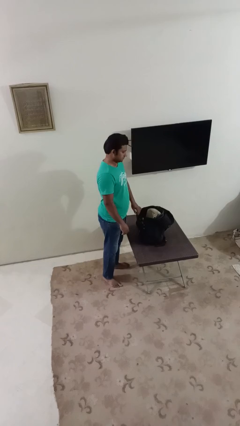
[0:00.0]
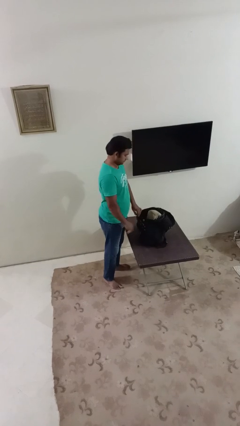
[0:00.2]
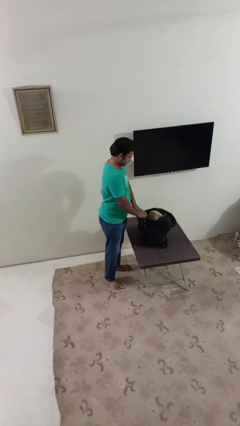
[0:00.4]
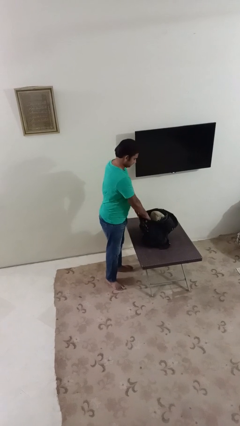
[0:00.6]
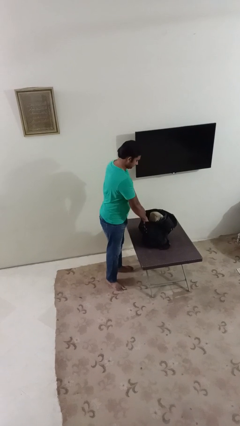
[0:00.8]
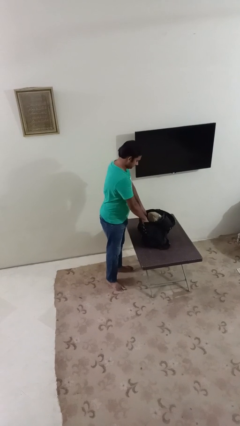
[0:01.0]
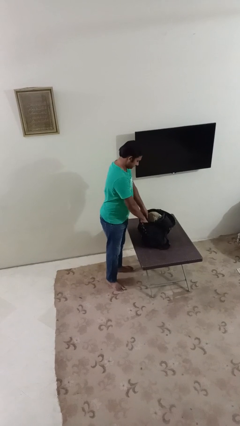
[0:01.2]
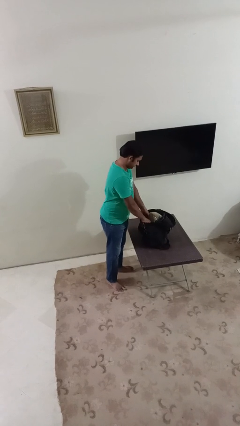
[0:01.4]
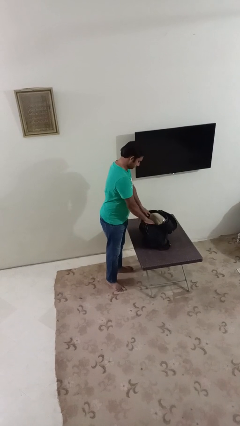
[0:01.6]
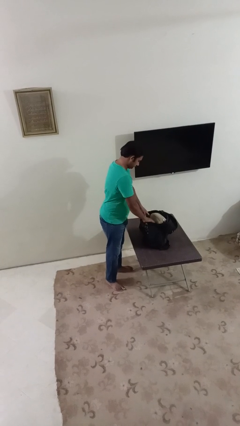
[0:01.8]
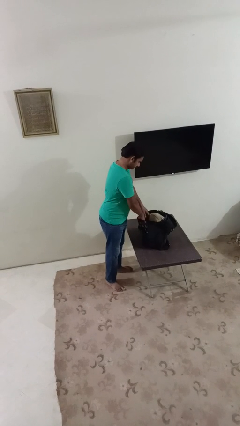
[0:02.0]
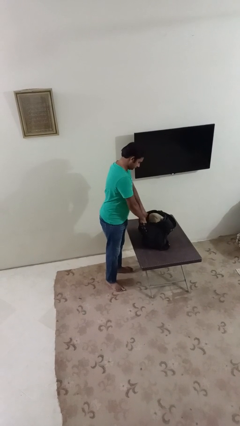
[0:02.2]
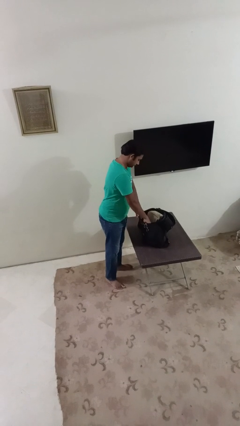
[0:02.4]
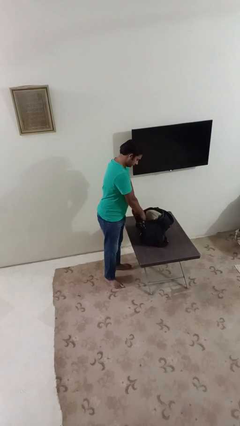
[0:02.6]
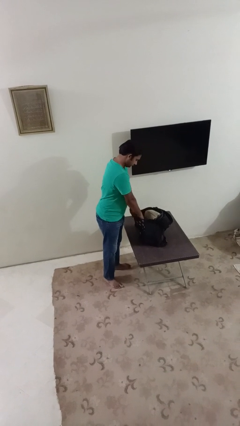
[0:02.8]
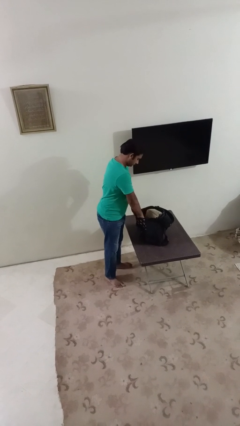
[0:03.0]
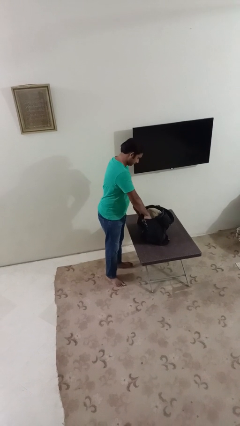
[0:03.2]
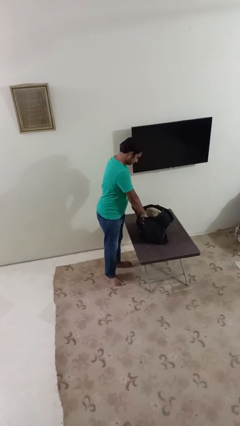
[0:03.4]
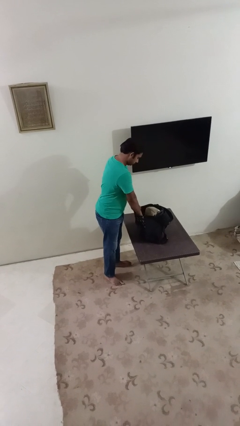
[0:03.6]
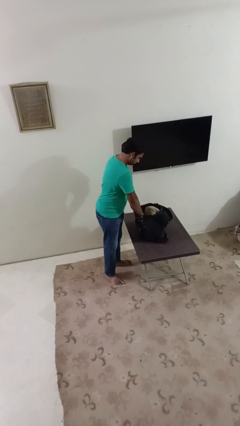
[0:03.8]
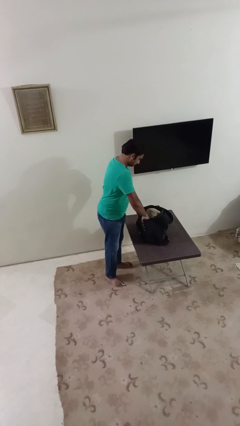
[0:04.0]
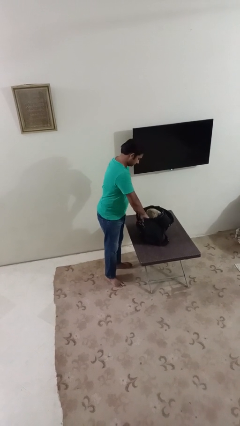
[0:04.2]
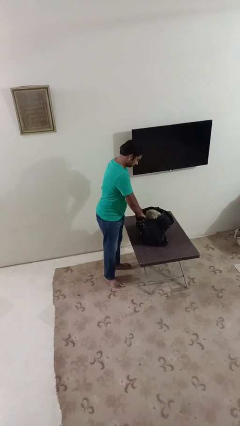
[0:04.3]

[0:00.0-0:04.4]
person searches in backpack

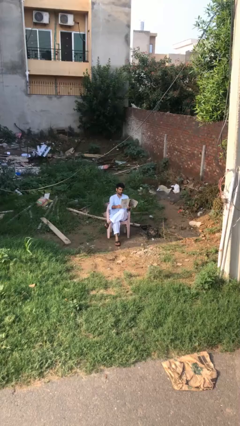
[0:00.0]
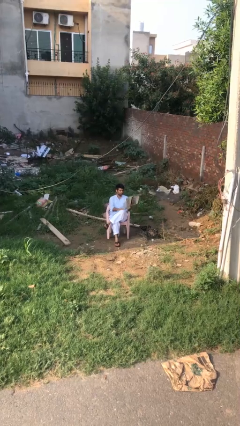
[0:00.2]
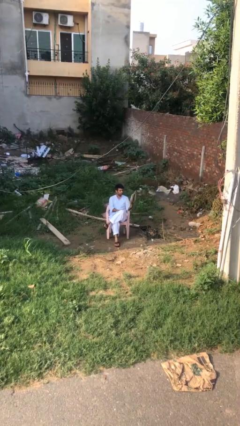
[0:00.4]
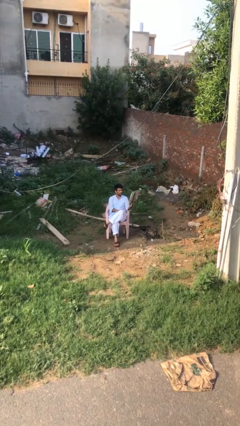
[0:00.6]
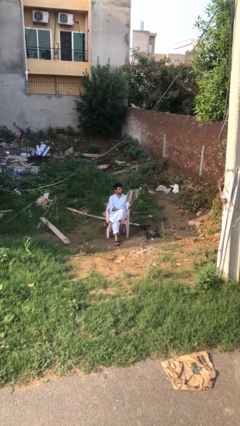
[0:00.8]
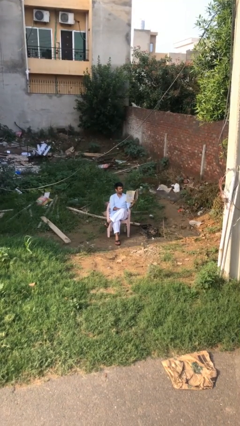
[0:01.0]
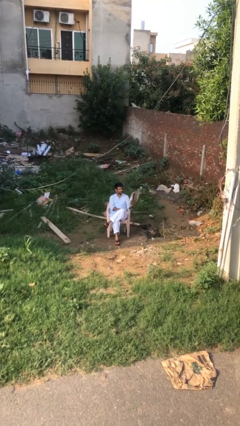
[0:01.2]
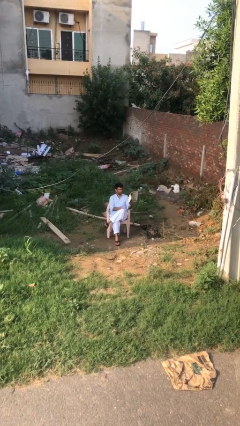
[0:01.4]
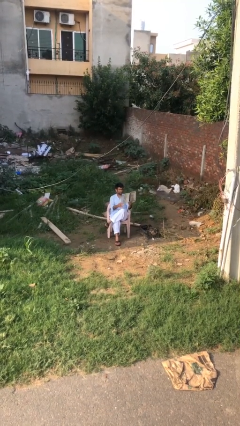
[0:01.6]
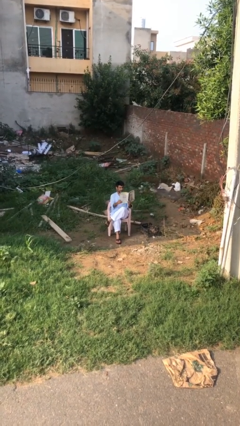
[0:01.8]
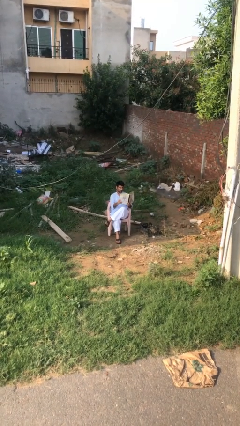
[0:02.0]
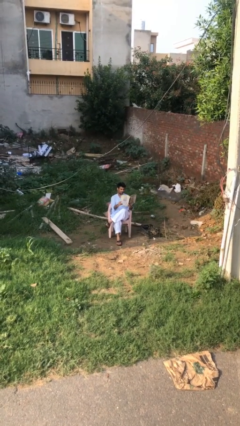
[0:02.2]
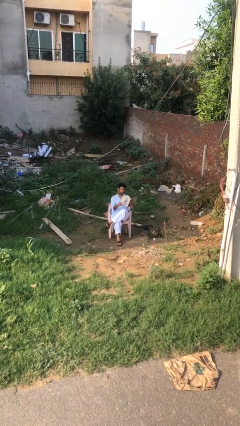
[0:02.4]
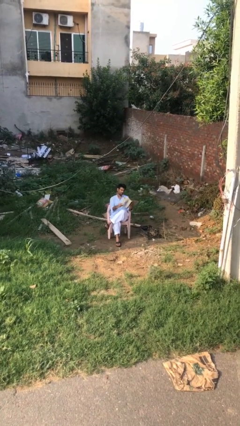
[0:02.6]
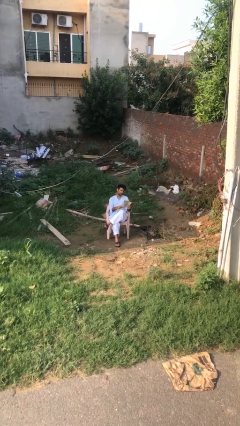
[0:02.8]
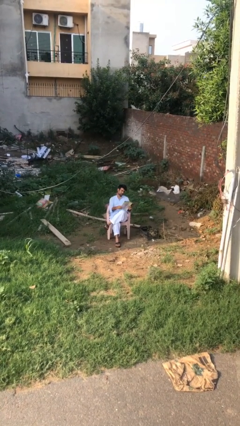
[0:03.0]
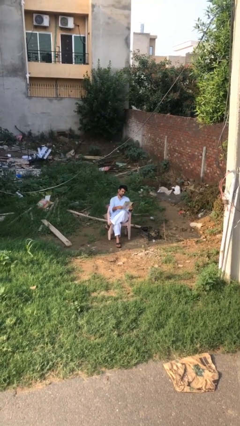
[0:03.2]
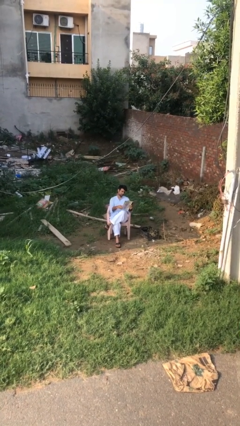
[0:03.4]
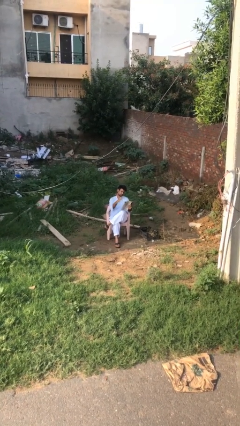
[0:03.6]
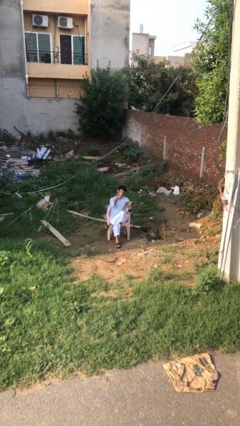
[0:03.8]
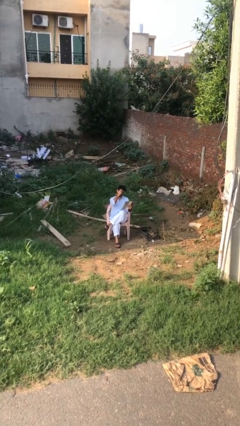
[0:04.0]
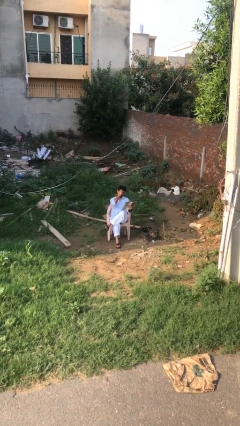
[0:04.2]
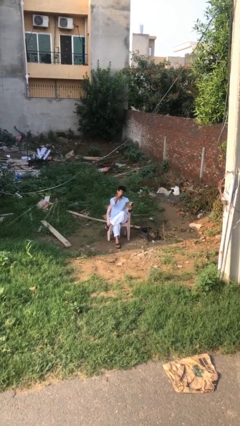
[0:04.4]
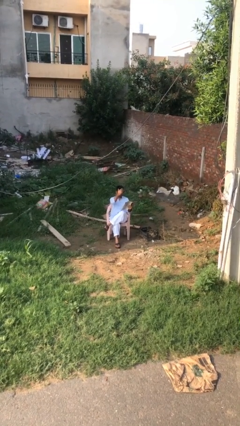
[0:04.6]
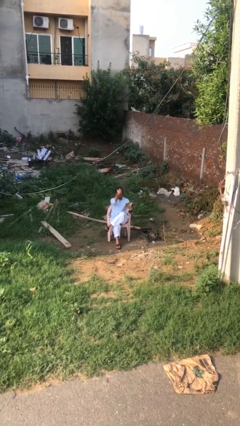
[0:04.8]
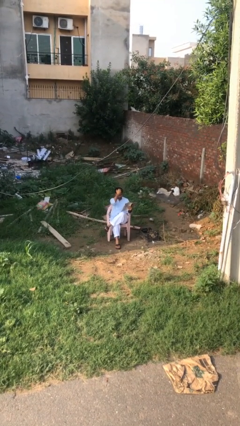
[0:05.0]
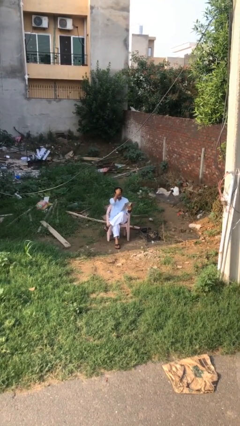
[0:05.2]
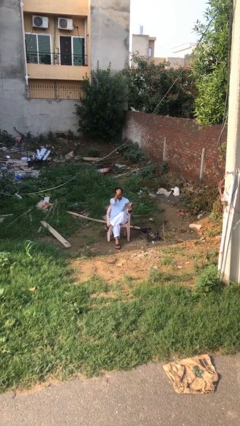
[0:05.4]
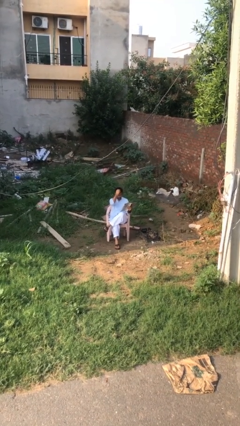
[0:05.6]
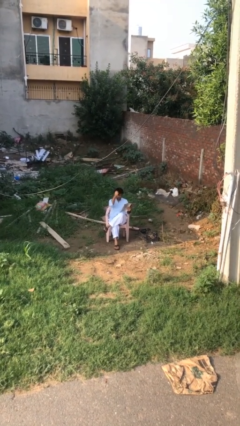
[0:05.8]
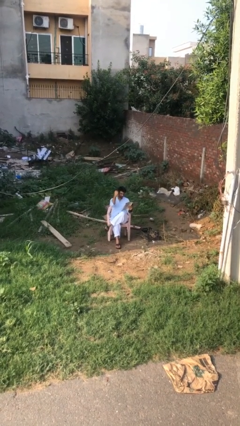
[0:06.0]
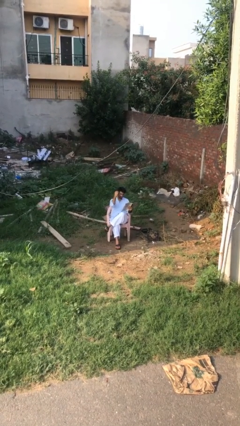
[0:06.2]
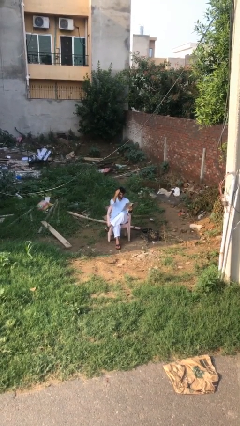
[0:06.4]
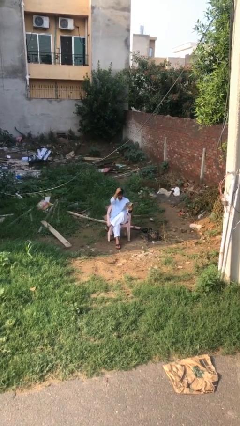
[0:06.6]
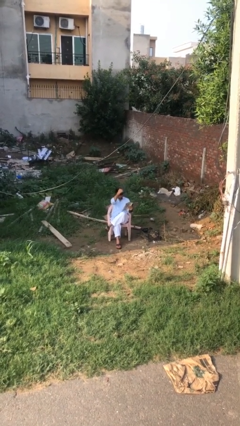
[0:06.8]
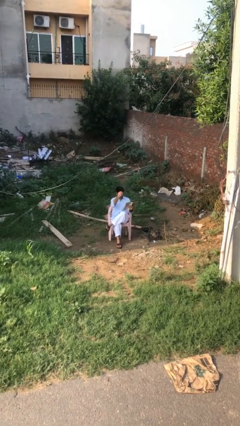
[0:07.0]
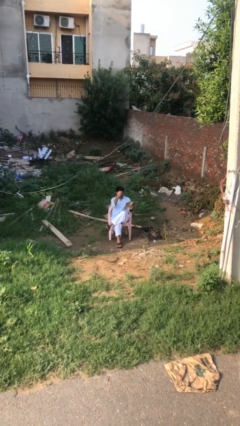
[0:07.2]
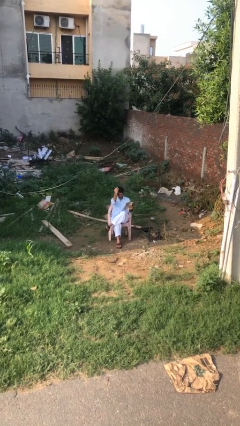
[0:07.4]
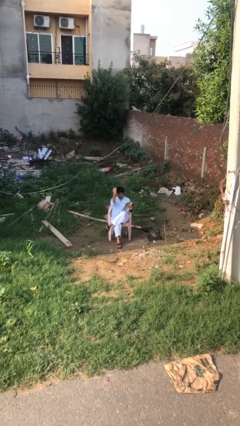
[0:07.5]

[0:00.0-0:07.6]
person reads document

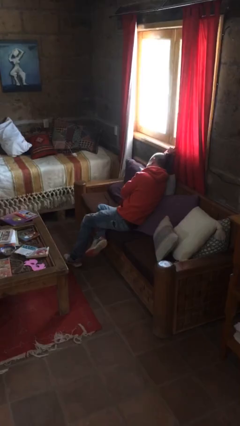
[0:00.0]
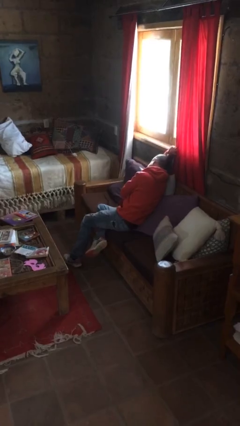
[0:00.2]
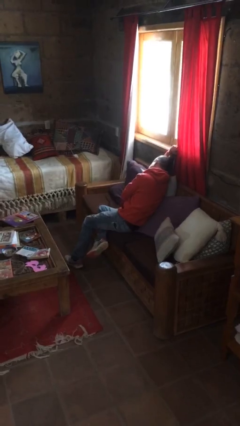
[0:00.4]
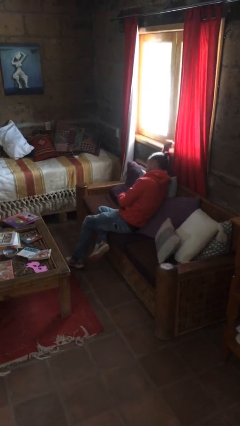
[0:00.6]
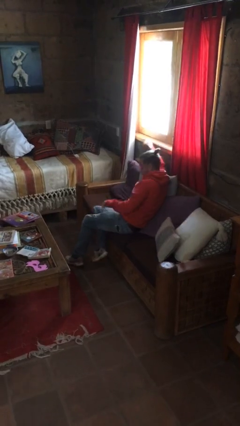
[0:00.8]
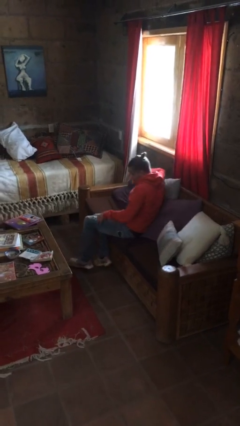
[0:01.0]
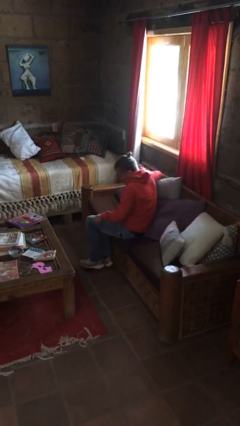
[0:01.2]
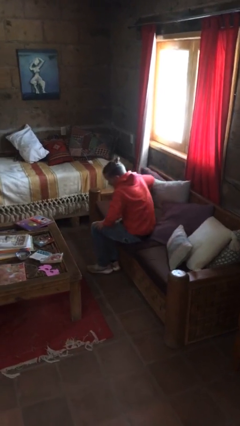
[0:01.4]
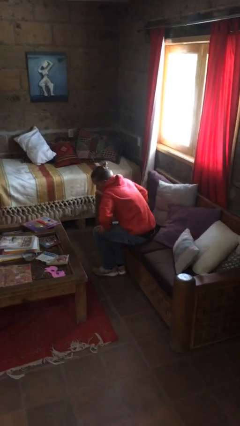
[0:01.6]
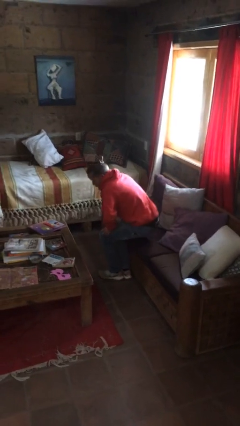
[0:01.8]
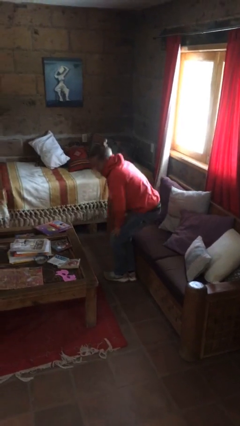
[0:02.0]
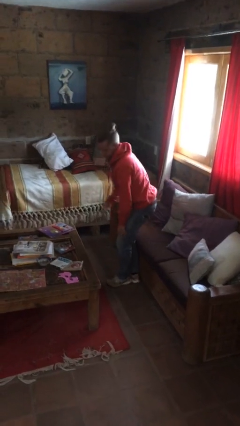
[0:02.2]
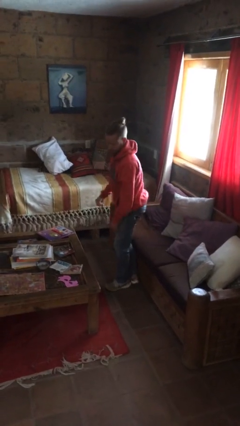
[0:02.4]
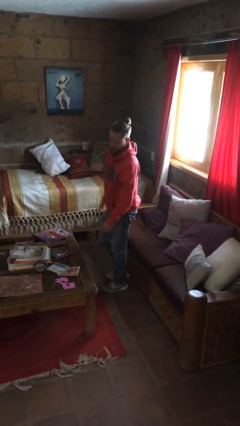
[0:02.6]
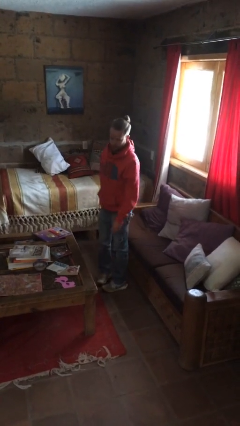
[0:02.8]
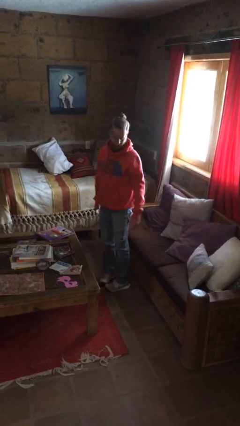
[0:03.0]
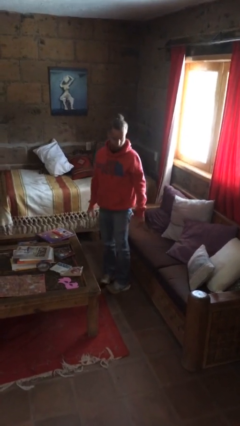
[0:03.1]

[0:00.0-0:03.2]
person stands up

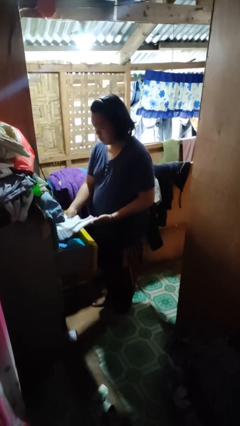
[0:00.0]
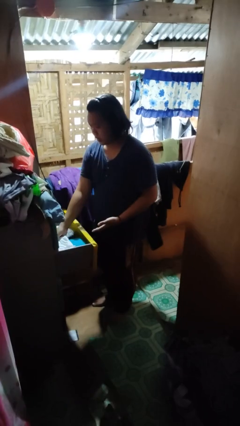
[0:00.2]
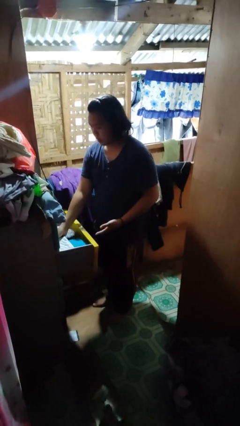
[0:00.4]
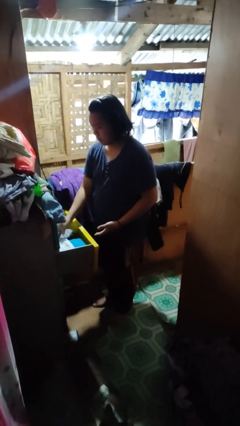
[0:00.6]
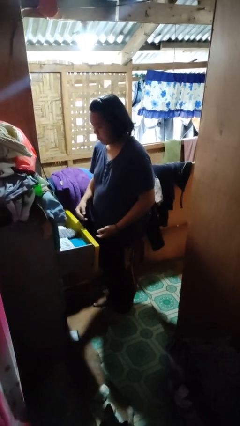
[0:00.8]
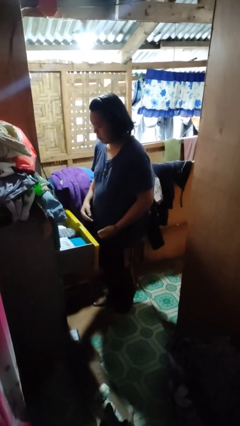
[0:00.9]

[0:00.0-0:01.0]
person puts clothes into dresser

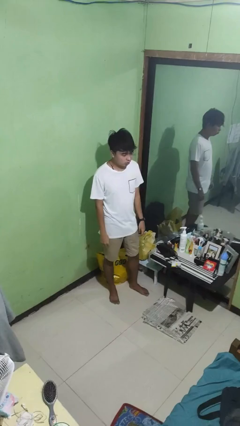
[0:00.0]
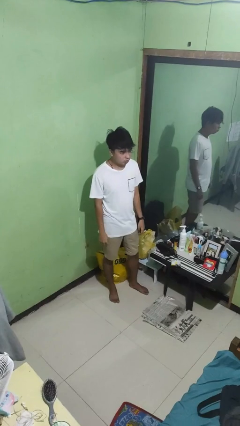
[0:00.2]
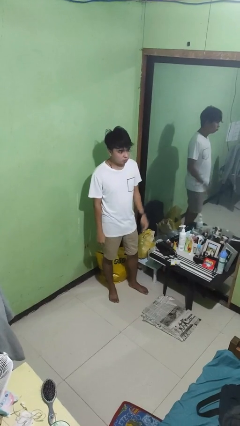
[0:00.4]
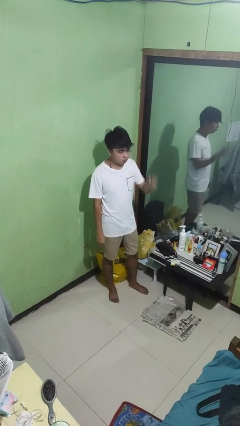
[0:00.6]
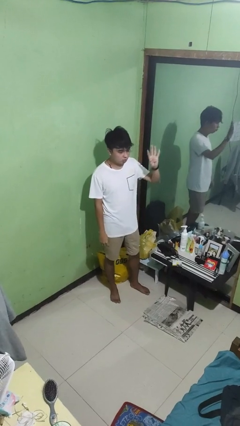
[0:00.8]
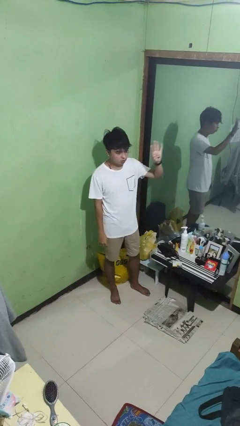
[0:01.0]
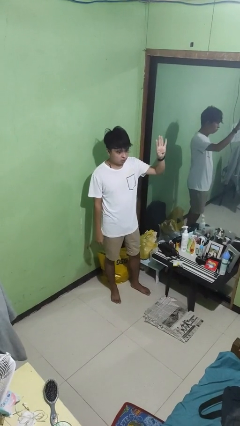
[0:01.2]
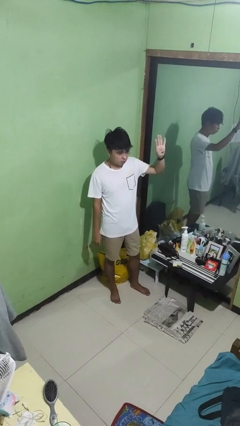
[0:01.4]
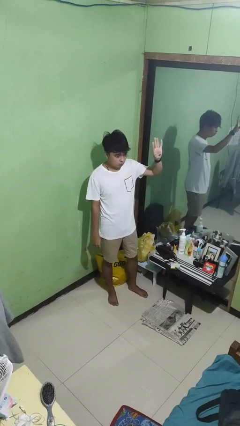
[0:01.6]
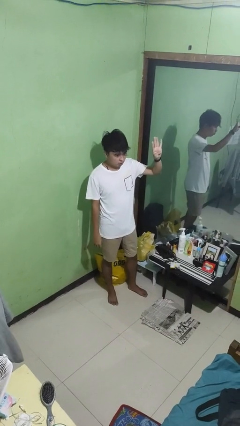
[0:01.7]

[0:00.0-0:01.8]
person gestures number four
